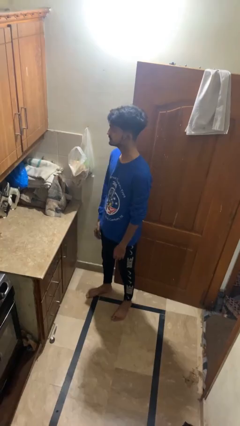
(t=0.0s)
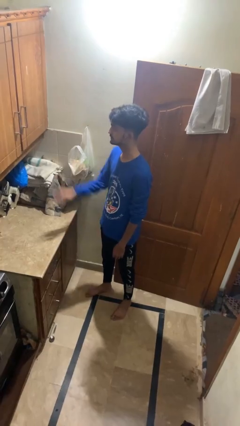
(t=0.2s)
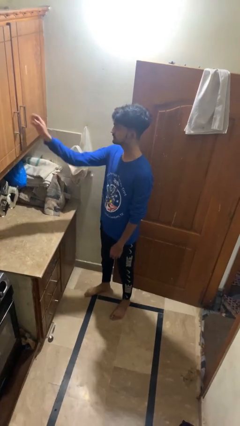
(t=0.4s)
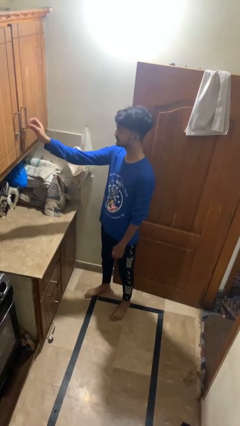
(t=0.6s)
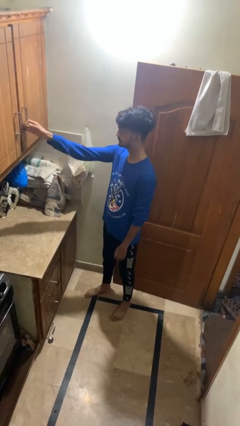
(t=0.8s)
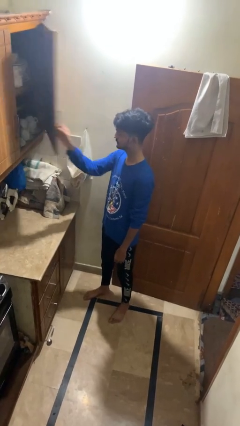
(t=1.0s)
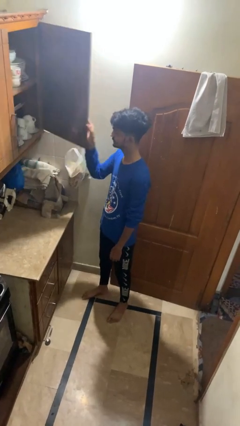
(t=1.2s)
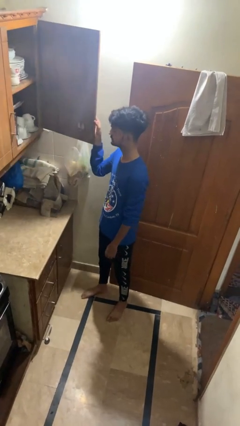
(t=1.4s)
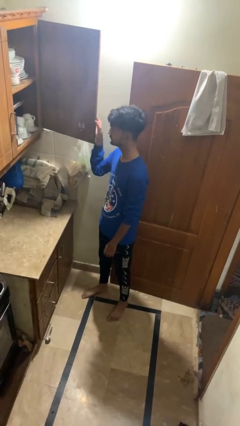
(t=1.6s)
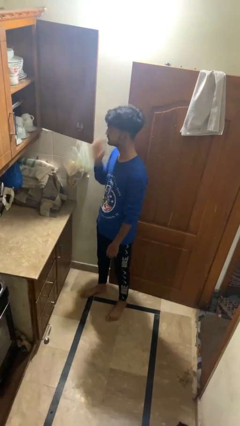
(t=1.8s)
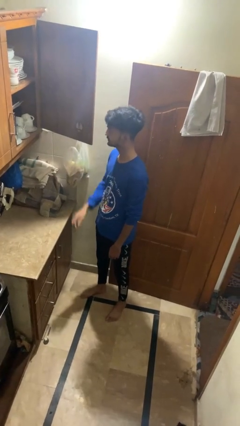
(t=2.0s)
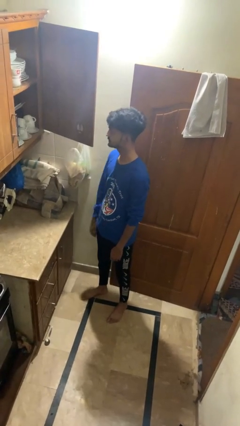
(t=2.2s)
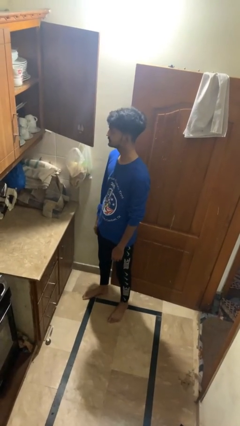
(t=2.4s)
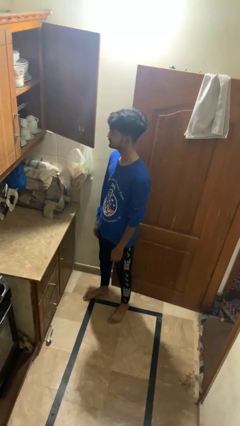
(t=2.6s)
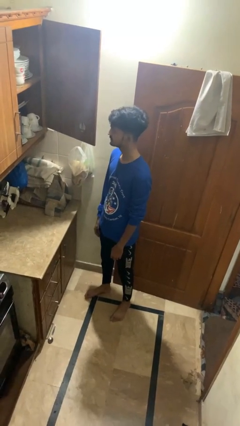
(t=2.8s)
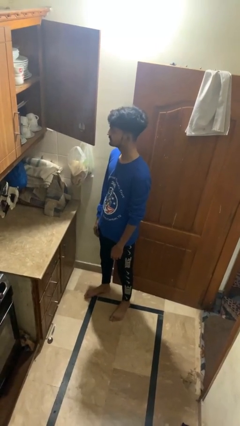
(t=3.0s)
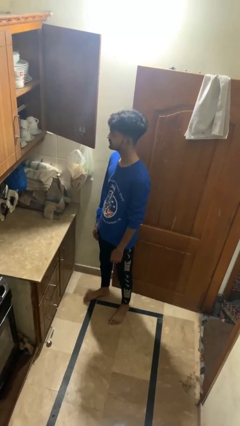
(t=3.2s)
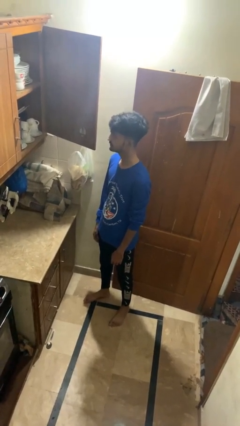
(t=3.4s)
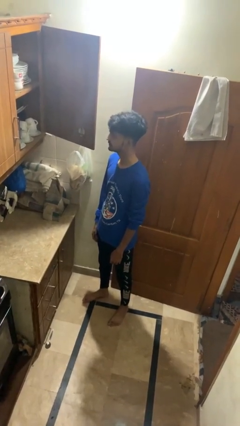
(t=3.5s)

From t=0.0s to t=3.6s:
person opens cabinet

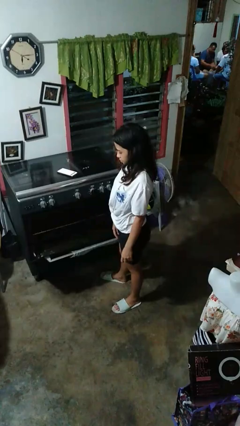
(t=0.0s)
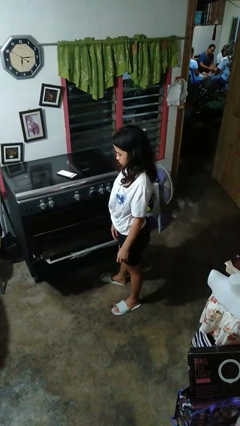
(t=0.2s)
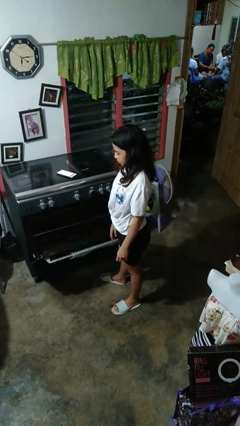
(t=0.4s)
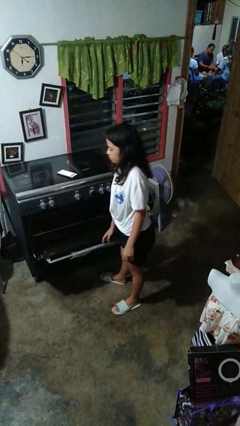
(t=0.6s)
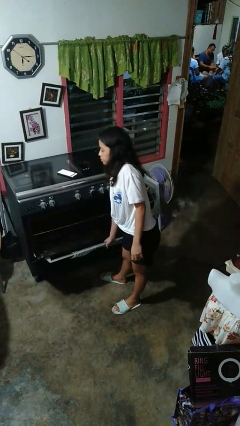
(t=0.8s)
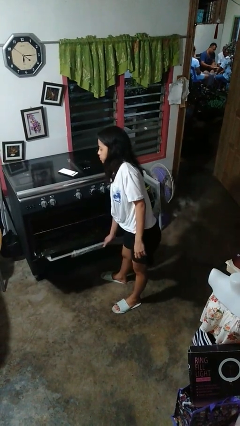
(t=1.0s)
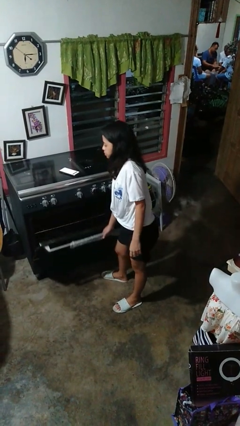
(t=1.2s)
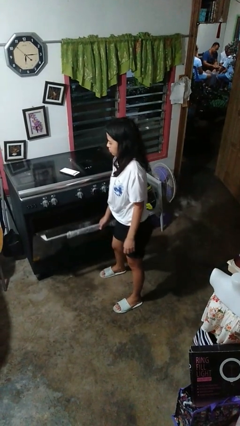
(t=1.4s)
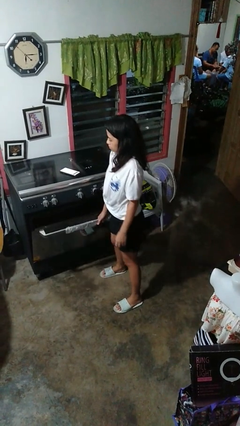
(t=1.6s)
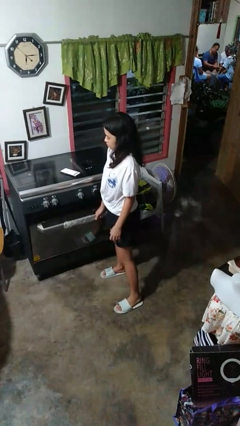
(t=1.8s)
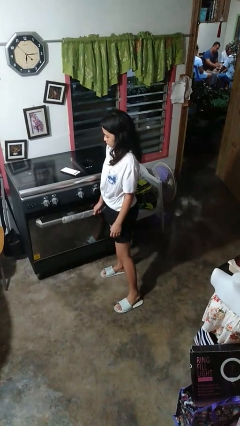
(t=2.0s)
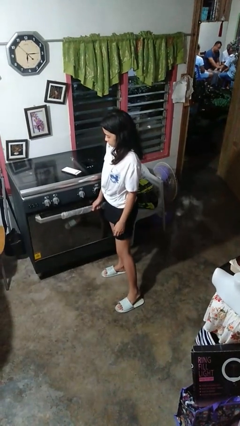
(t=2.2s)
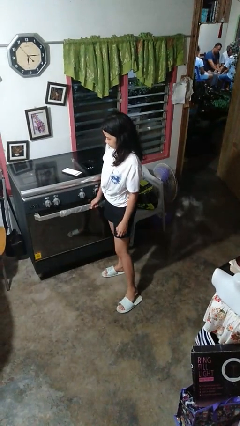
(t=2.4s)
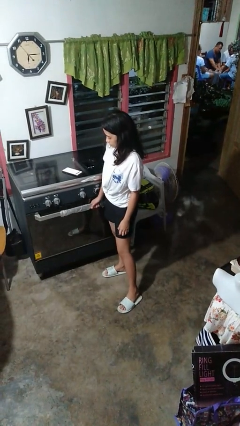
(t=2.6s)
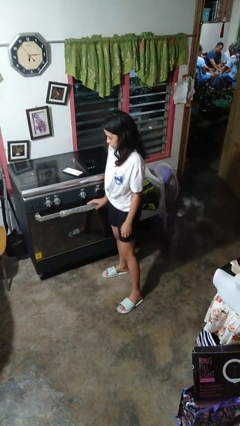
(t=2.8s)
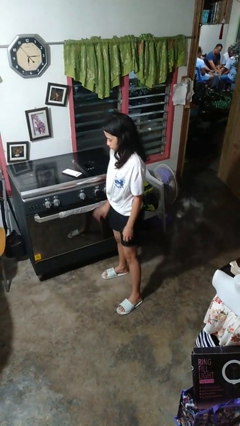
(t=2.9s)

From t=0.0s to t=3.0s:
person closes oven door

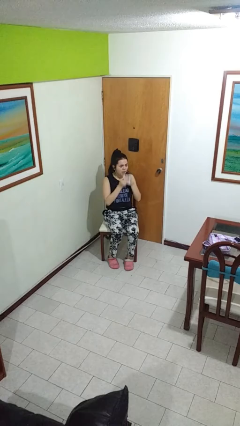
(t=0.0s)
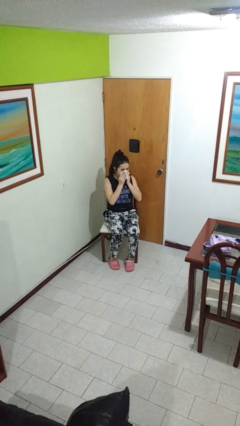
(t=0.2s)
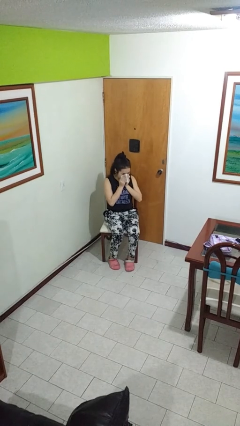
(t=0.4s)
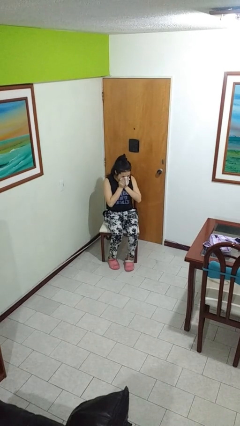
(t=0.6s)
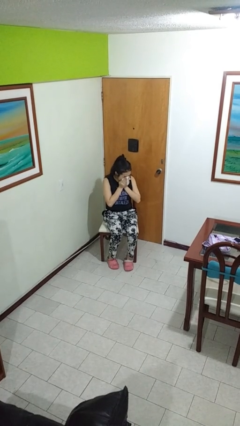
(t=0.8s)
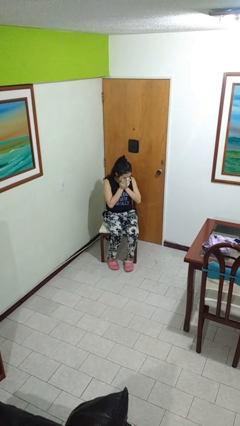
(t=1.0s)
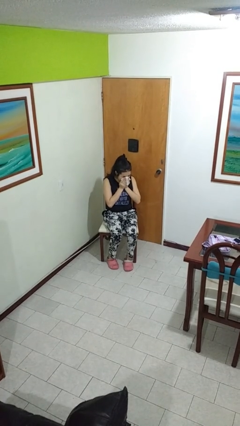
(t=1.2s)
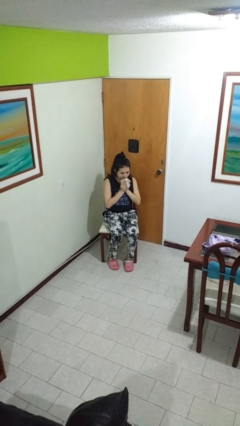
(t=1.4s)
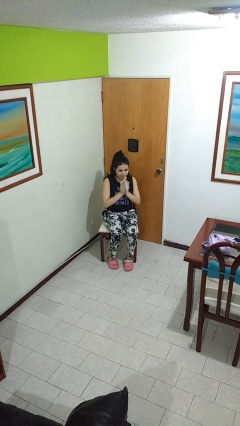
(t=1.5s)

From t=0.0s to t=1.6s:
person blows nose

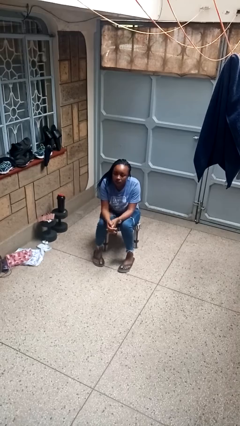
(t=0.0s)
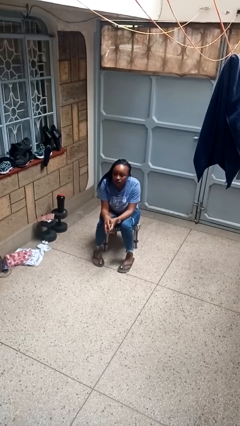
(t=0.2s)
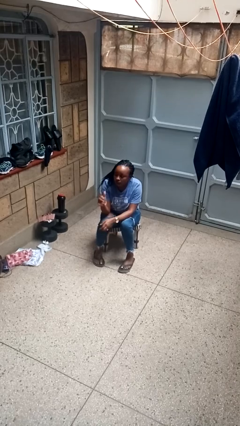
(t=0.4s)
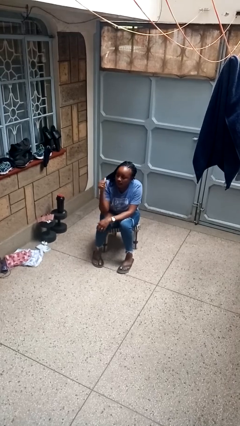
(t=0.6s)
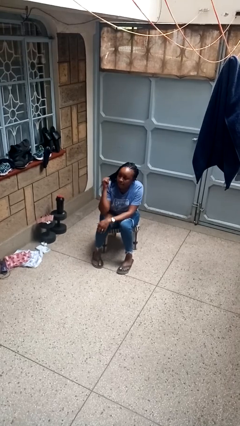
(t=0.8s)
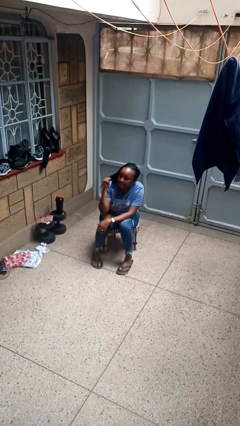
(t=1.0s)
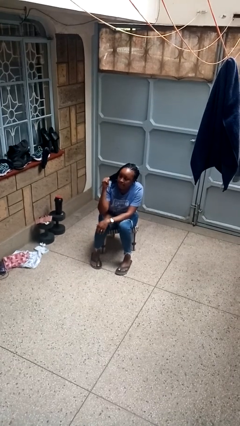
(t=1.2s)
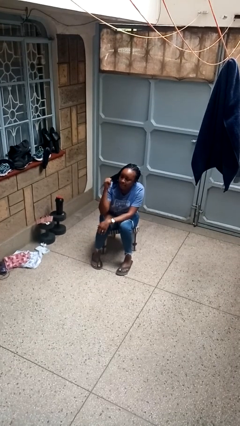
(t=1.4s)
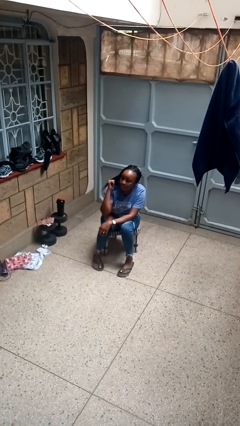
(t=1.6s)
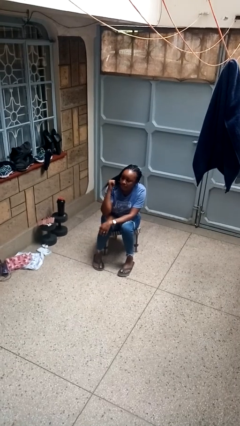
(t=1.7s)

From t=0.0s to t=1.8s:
person gestures behind me

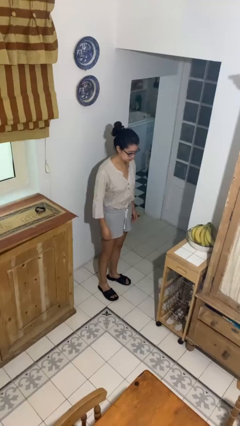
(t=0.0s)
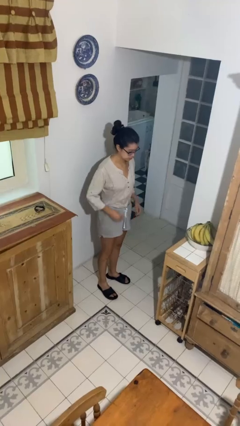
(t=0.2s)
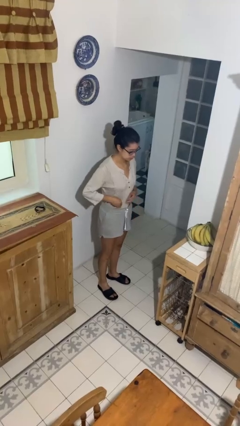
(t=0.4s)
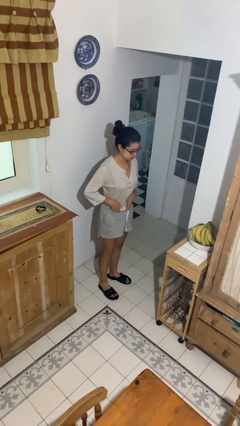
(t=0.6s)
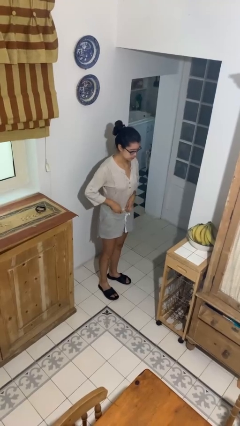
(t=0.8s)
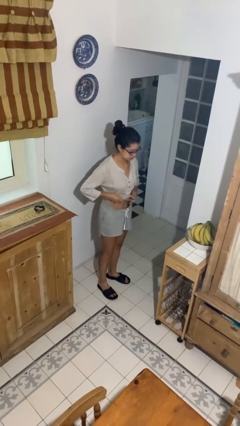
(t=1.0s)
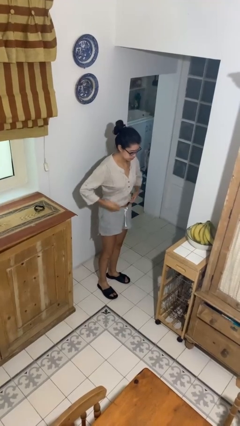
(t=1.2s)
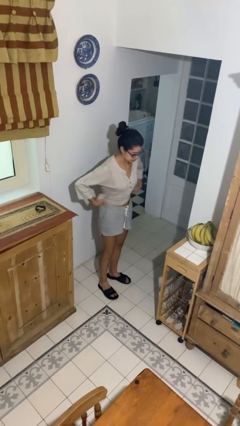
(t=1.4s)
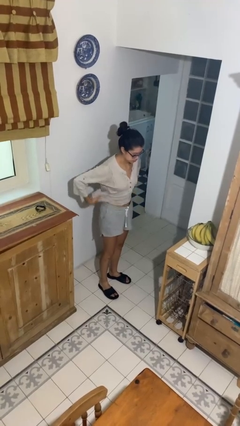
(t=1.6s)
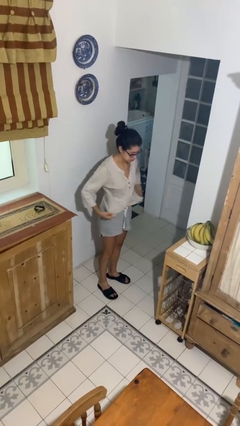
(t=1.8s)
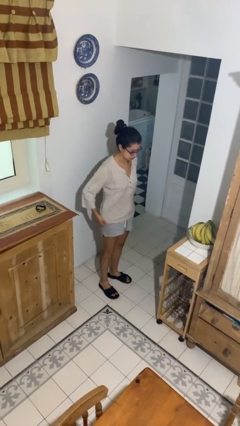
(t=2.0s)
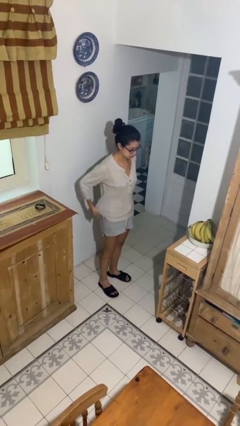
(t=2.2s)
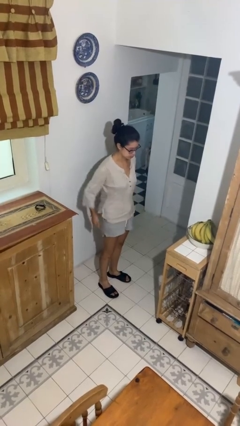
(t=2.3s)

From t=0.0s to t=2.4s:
person untucks shirt

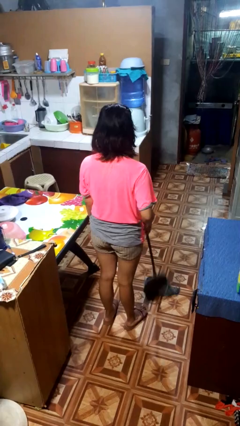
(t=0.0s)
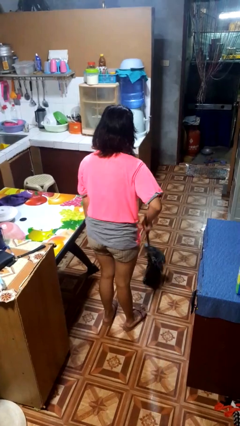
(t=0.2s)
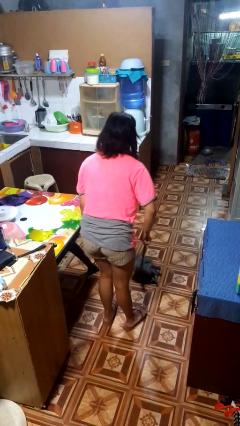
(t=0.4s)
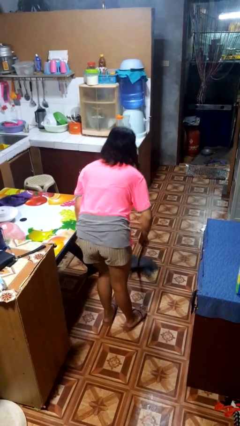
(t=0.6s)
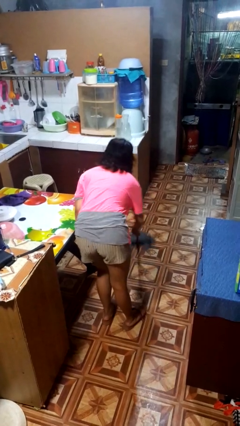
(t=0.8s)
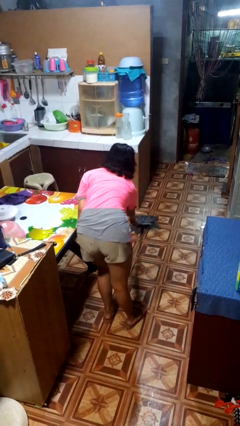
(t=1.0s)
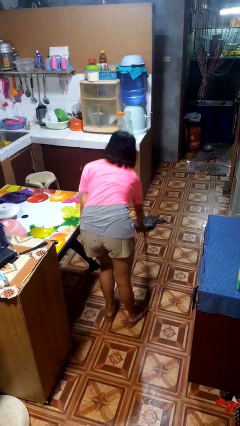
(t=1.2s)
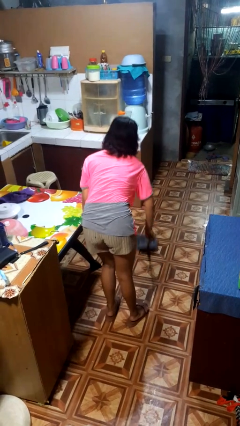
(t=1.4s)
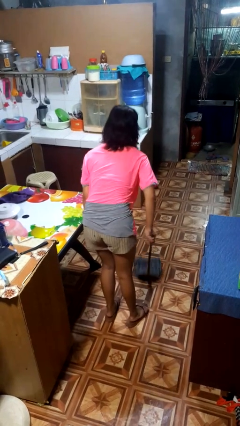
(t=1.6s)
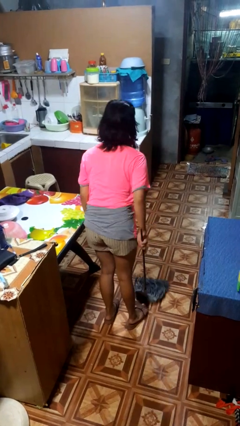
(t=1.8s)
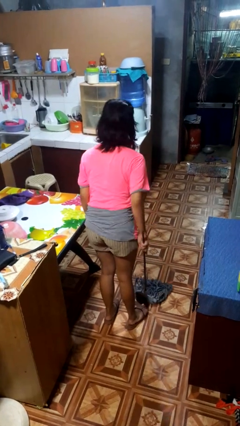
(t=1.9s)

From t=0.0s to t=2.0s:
person mops

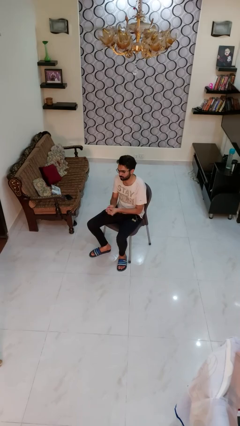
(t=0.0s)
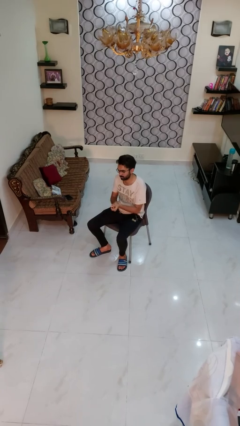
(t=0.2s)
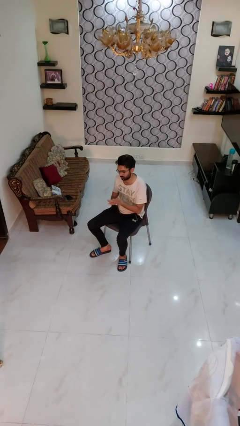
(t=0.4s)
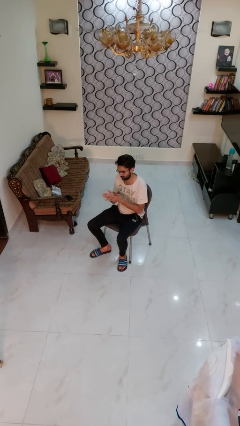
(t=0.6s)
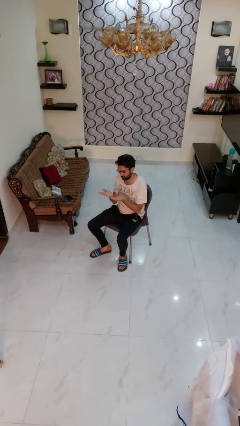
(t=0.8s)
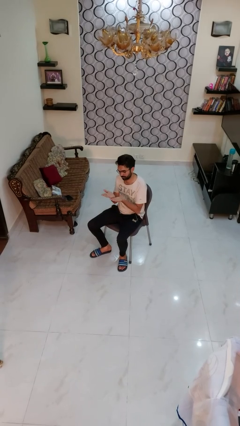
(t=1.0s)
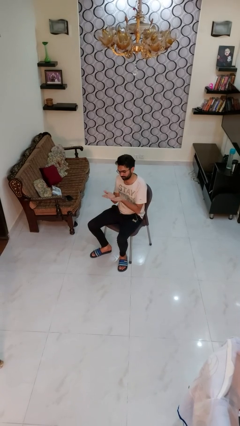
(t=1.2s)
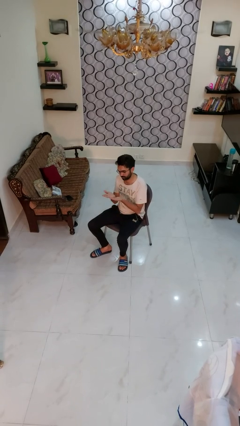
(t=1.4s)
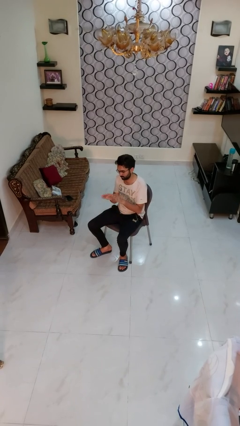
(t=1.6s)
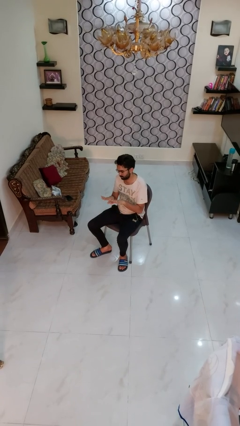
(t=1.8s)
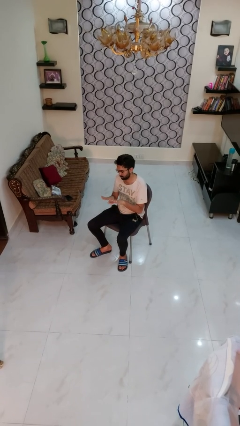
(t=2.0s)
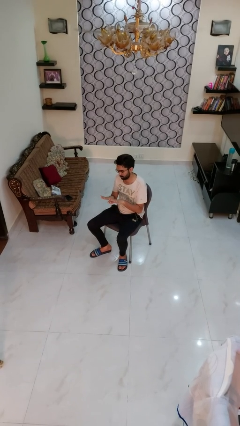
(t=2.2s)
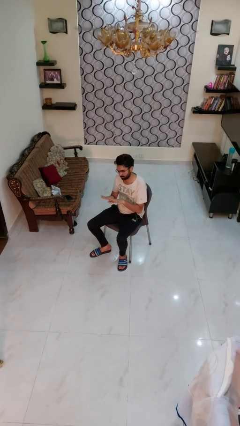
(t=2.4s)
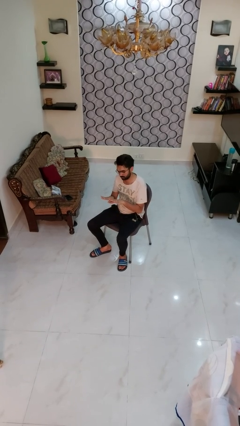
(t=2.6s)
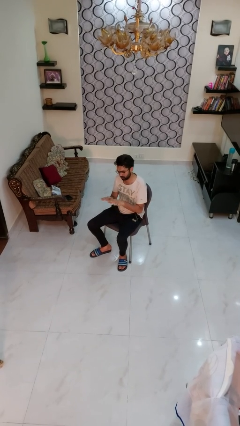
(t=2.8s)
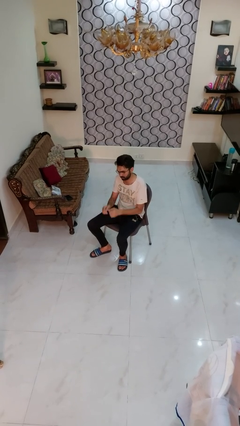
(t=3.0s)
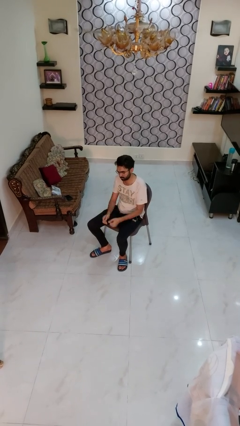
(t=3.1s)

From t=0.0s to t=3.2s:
person looks at hands in lap
